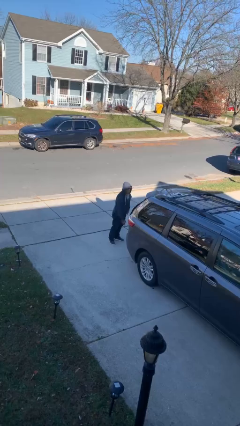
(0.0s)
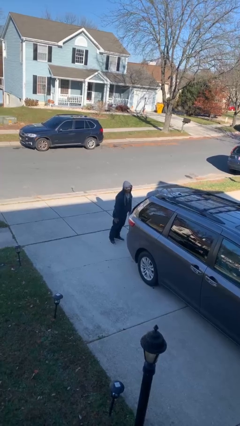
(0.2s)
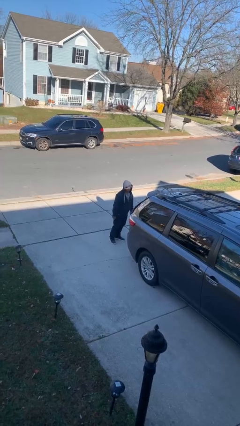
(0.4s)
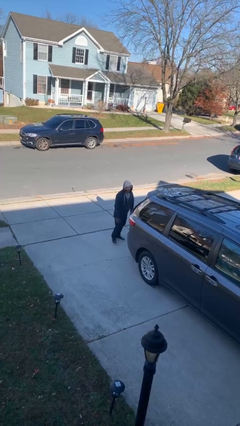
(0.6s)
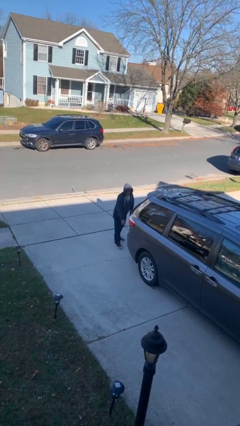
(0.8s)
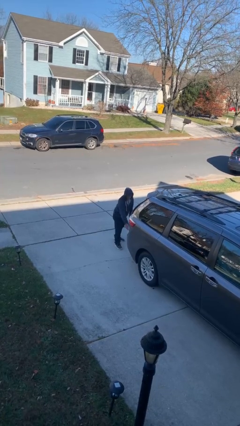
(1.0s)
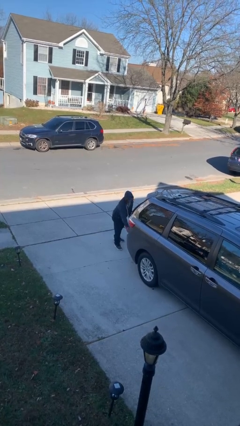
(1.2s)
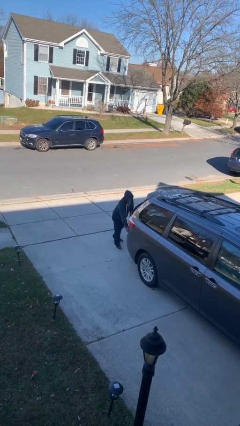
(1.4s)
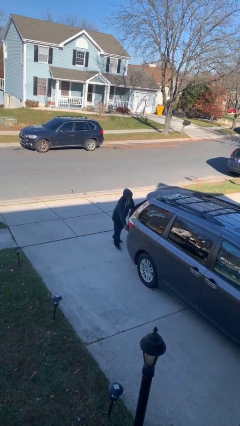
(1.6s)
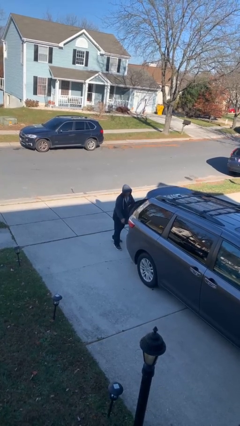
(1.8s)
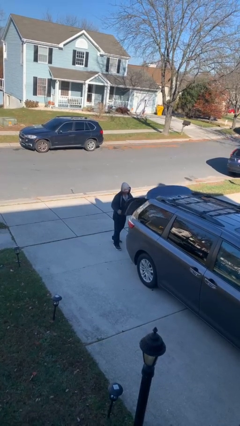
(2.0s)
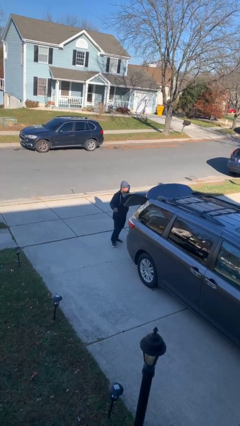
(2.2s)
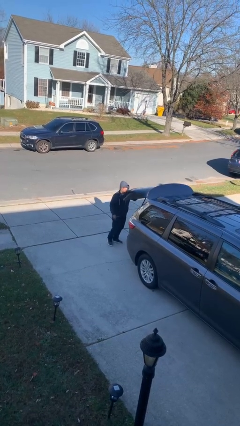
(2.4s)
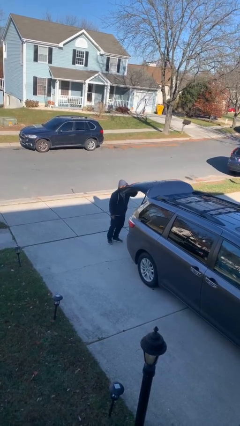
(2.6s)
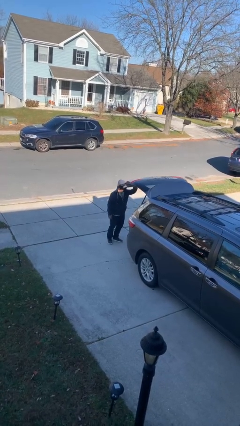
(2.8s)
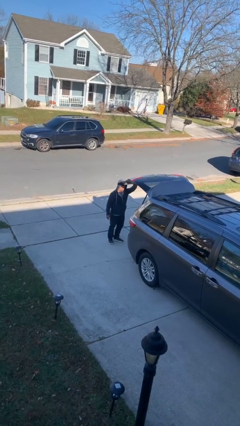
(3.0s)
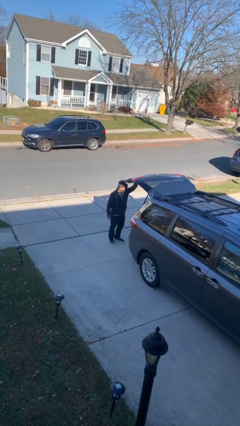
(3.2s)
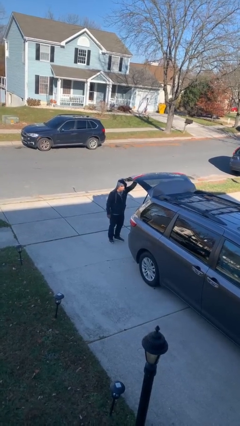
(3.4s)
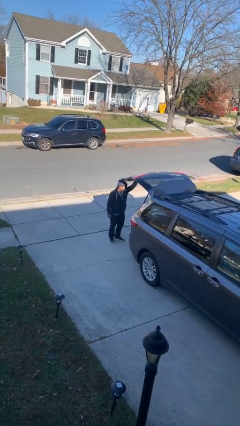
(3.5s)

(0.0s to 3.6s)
person opens car trunk

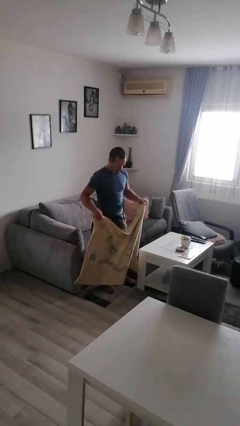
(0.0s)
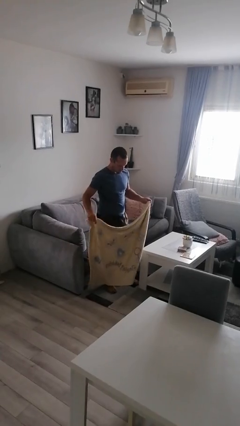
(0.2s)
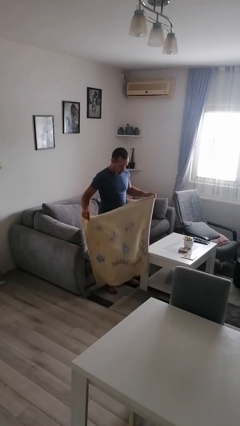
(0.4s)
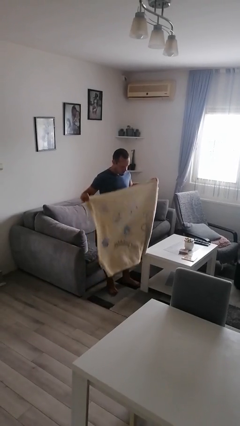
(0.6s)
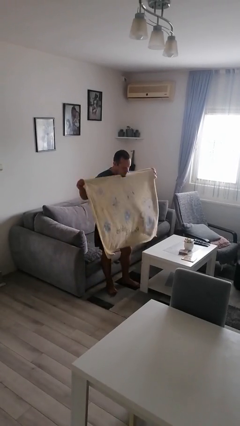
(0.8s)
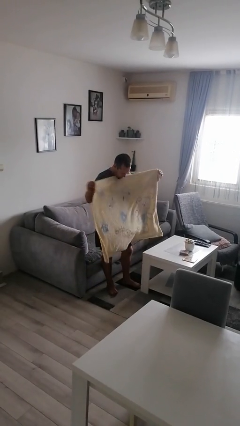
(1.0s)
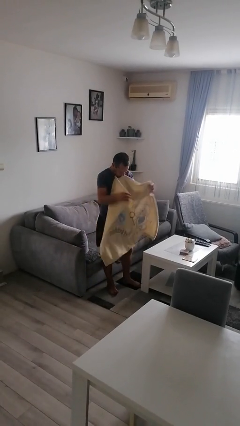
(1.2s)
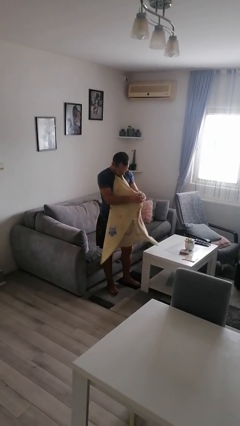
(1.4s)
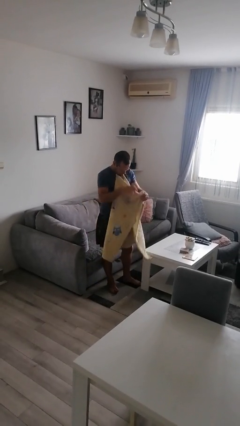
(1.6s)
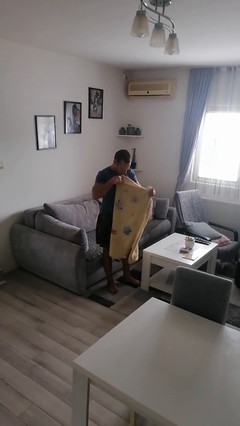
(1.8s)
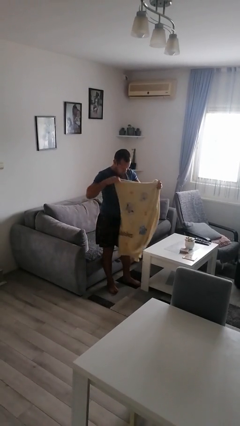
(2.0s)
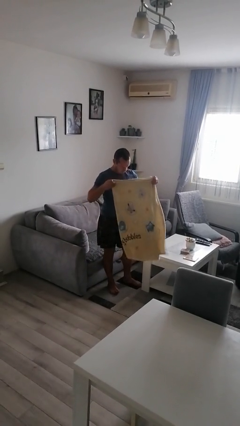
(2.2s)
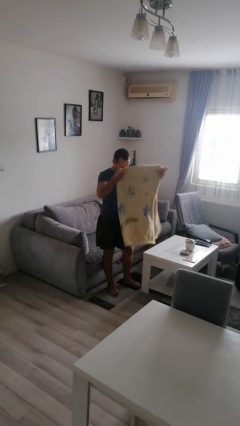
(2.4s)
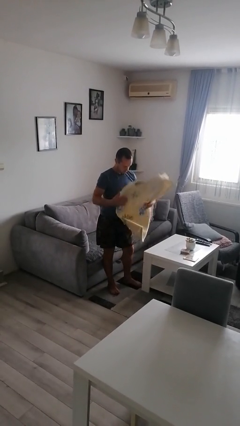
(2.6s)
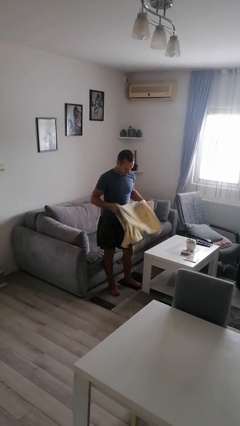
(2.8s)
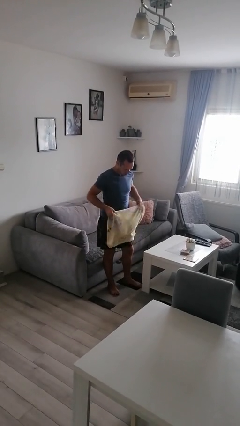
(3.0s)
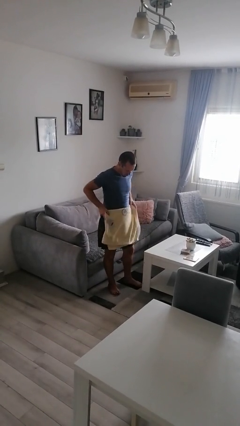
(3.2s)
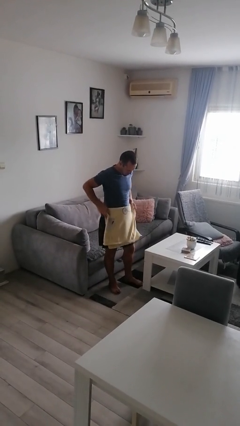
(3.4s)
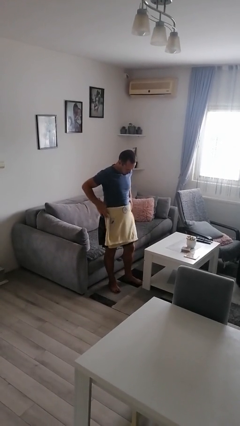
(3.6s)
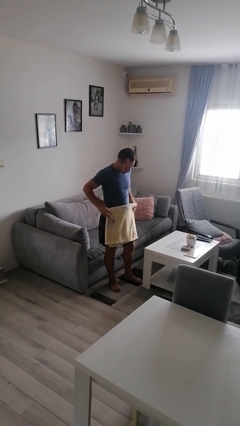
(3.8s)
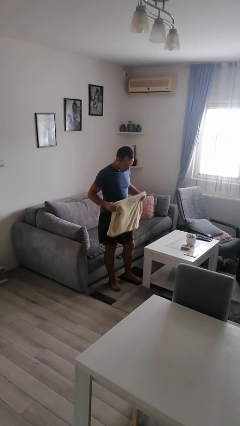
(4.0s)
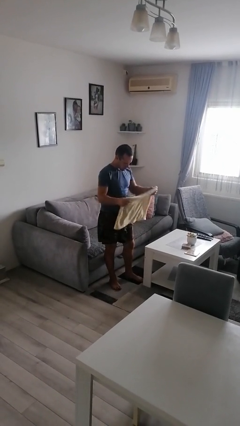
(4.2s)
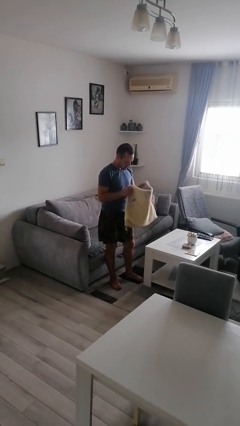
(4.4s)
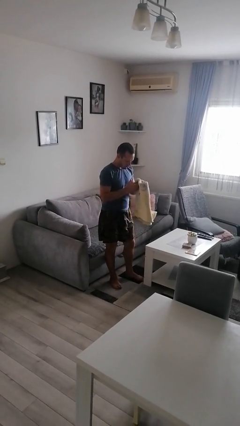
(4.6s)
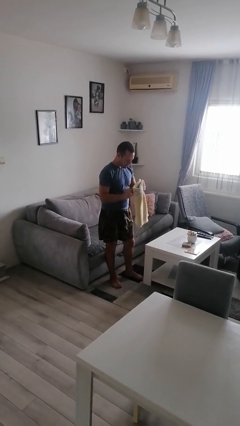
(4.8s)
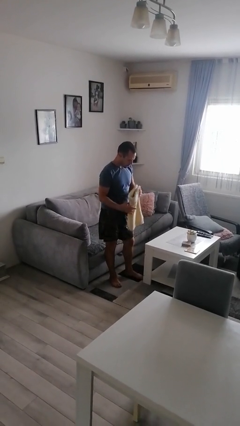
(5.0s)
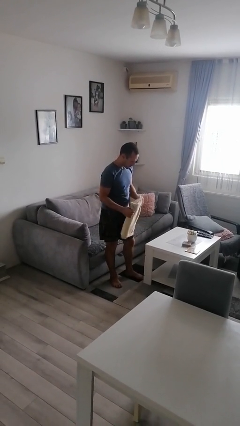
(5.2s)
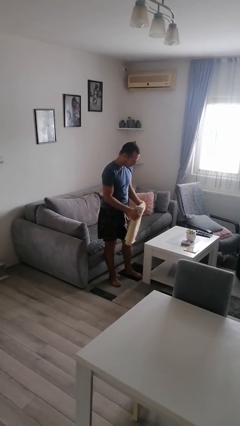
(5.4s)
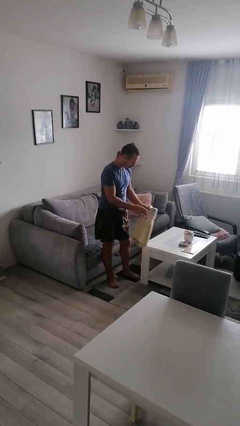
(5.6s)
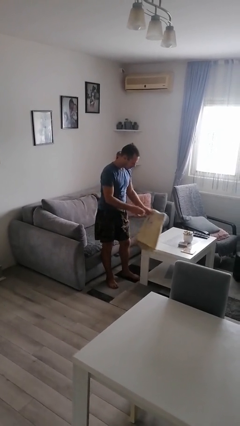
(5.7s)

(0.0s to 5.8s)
person folds blanket

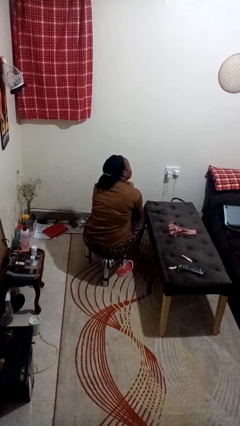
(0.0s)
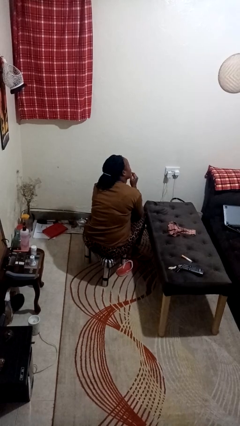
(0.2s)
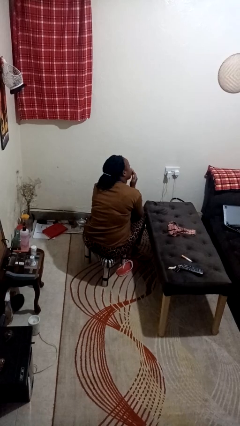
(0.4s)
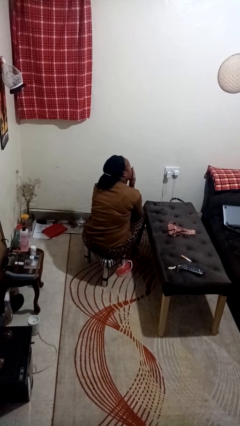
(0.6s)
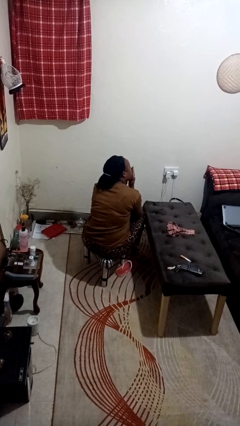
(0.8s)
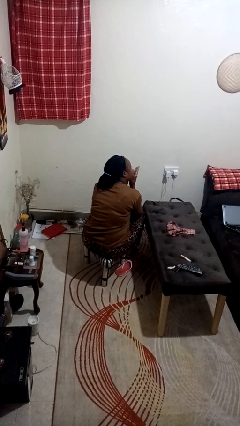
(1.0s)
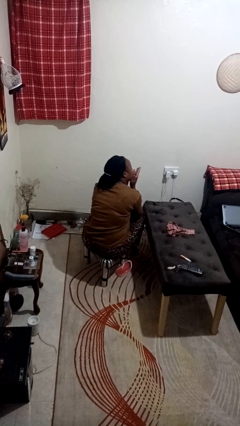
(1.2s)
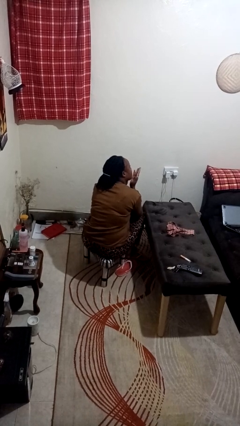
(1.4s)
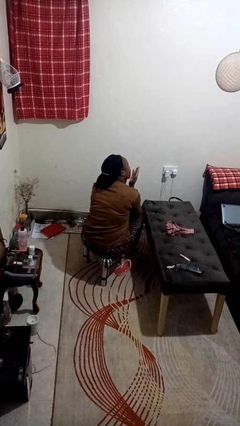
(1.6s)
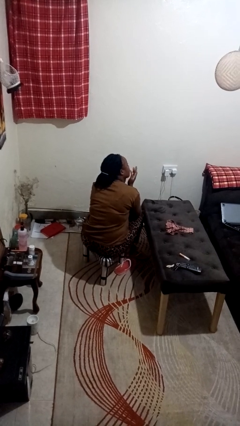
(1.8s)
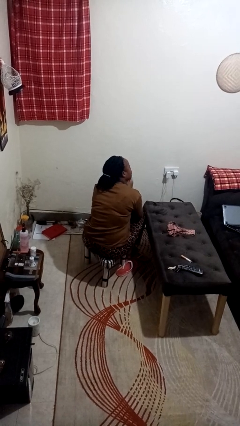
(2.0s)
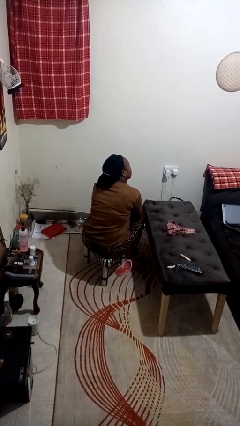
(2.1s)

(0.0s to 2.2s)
person gestures blow kiss

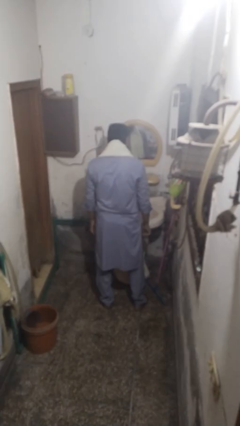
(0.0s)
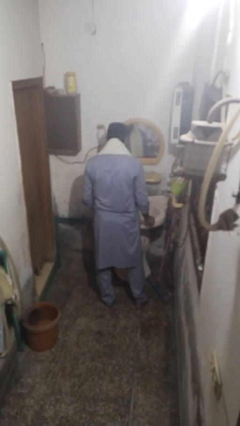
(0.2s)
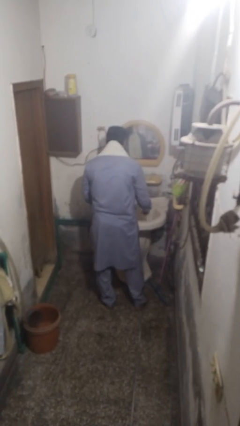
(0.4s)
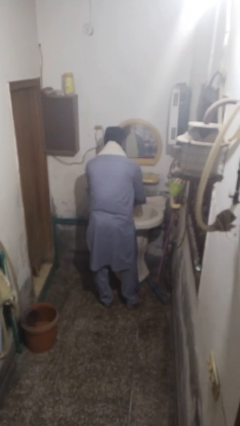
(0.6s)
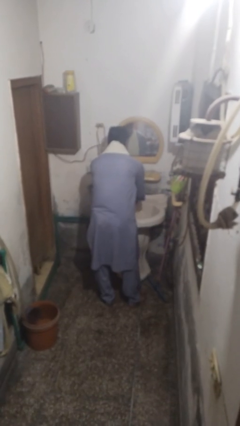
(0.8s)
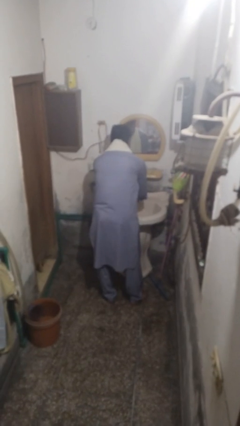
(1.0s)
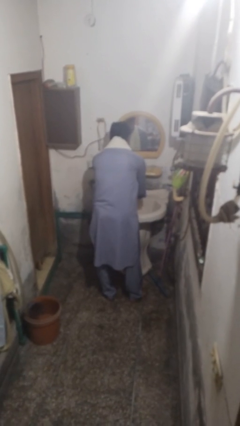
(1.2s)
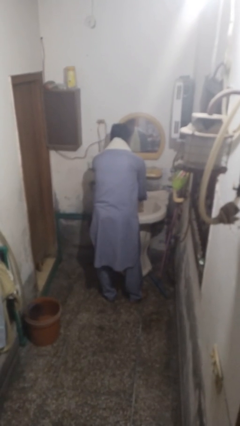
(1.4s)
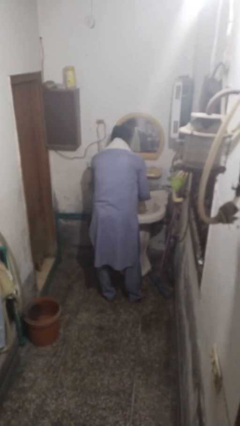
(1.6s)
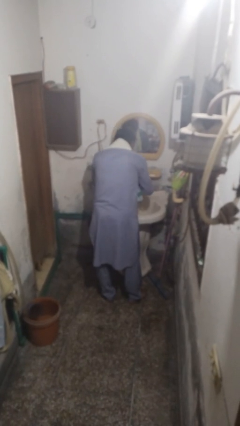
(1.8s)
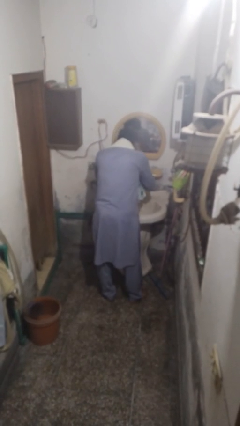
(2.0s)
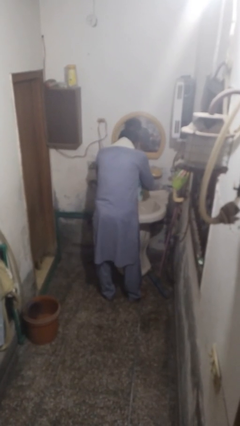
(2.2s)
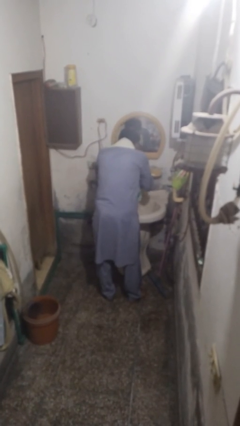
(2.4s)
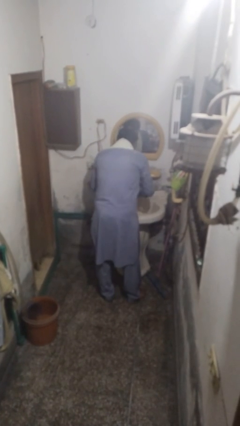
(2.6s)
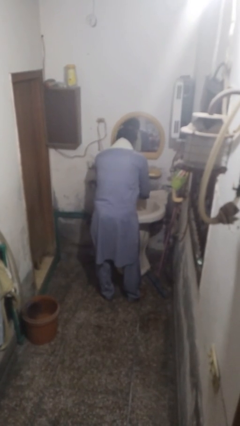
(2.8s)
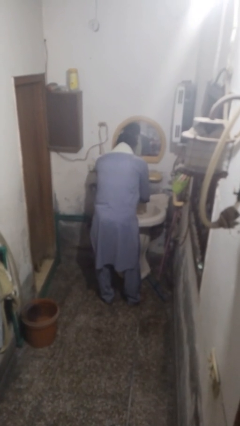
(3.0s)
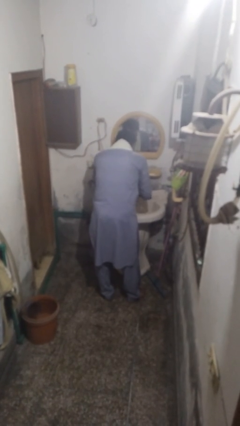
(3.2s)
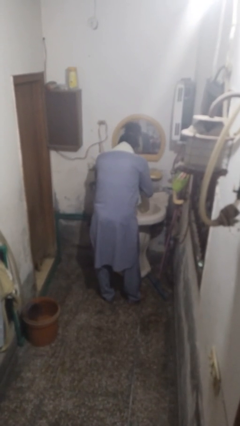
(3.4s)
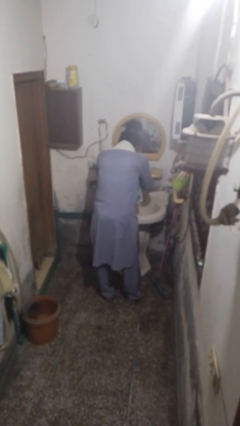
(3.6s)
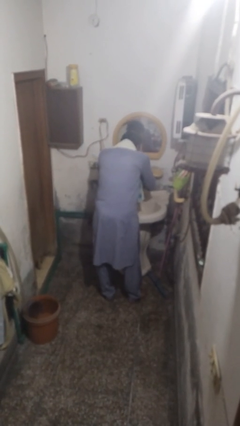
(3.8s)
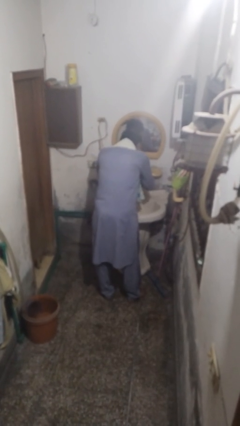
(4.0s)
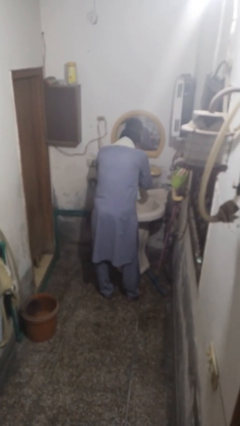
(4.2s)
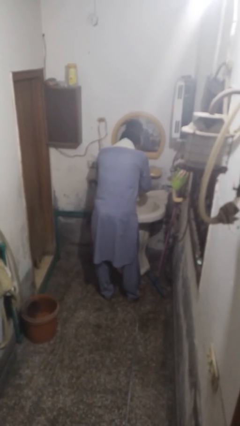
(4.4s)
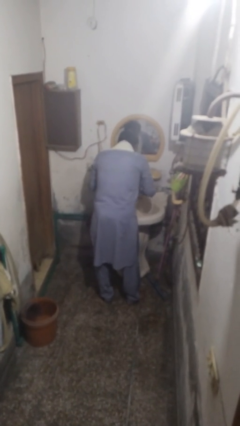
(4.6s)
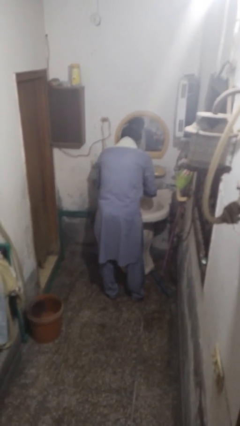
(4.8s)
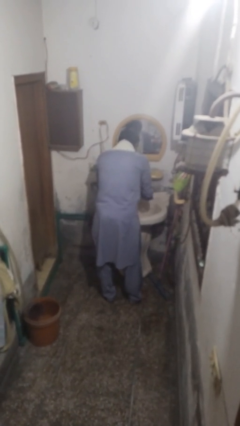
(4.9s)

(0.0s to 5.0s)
person washes face

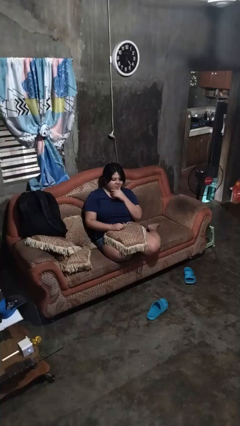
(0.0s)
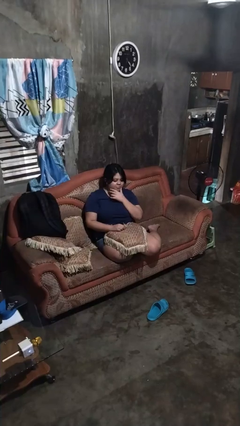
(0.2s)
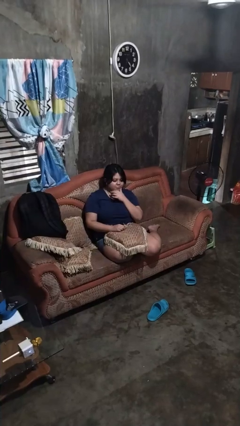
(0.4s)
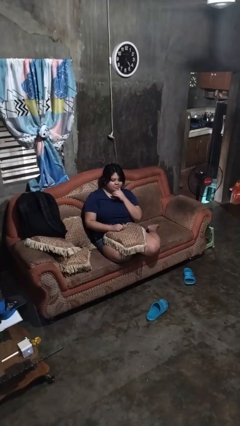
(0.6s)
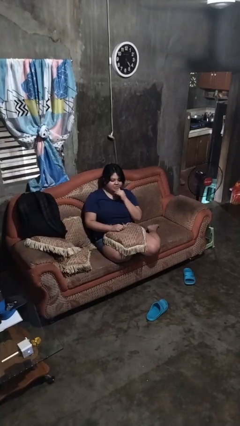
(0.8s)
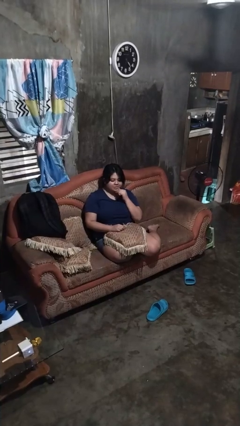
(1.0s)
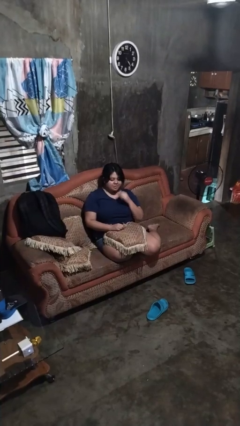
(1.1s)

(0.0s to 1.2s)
person strokes chin
